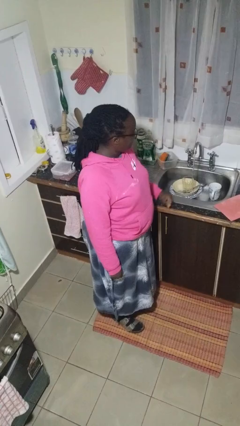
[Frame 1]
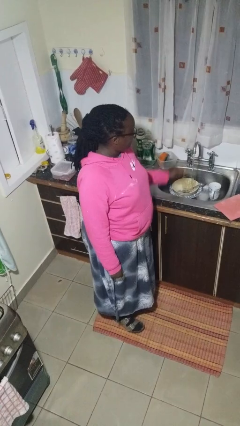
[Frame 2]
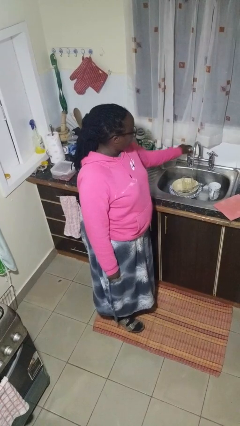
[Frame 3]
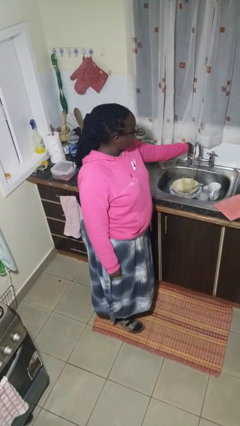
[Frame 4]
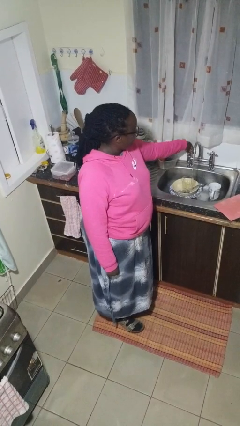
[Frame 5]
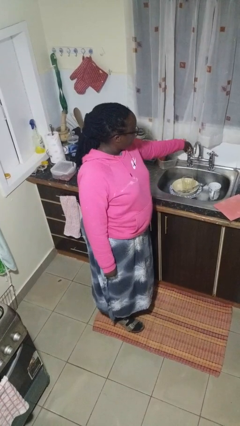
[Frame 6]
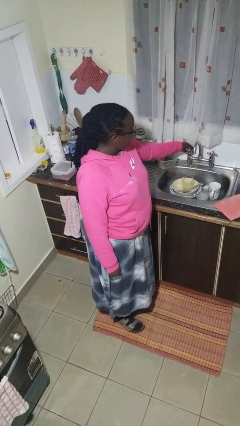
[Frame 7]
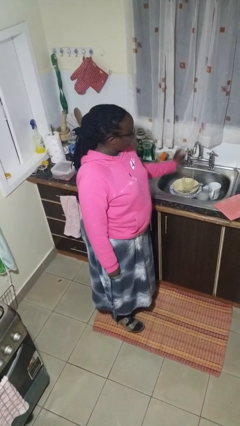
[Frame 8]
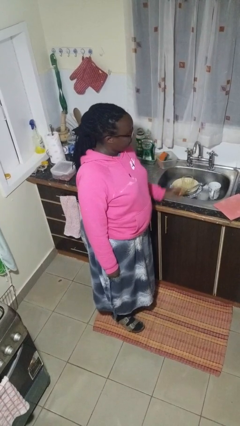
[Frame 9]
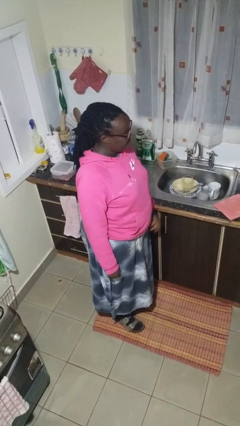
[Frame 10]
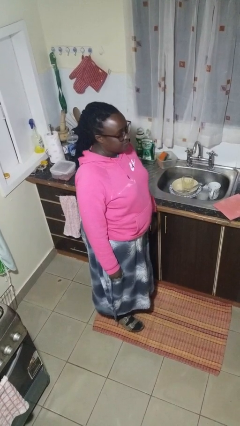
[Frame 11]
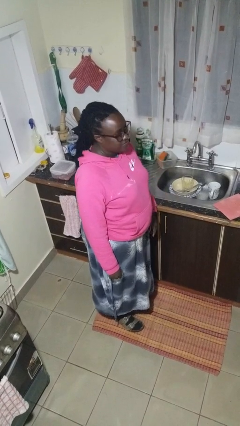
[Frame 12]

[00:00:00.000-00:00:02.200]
person turns off faucet

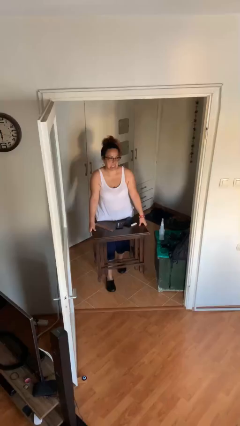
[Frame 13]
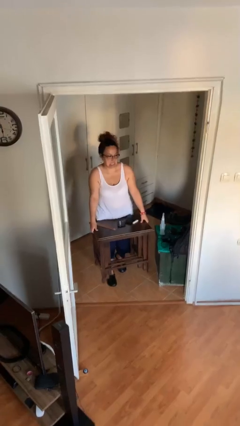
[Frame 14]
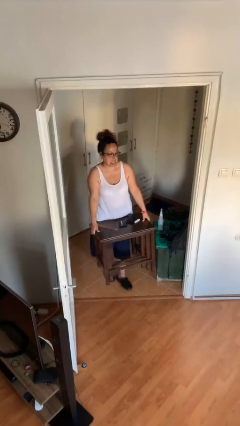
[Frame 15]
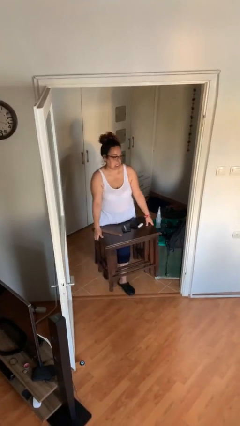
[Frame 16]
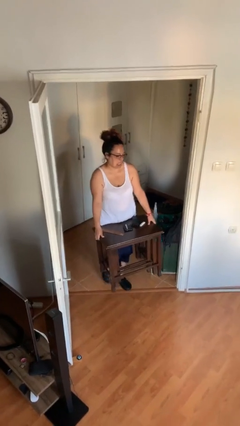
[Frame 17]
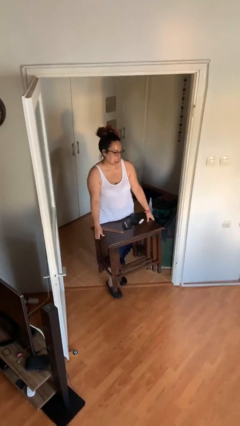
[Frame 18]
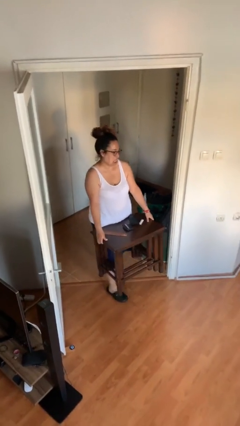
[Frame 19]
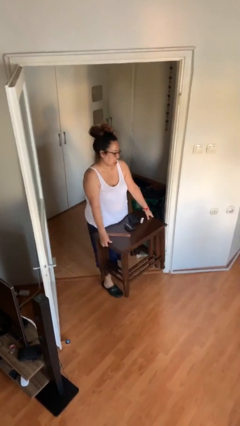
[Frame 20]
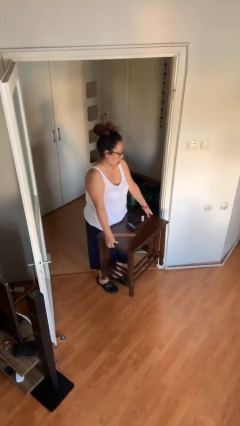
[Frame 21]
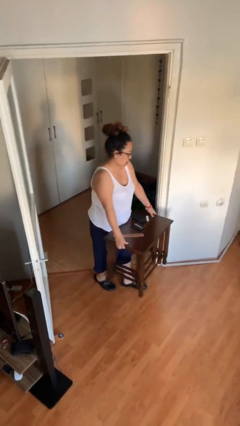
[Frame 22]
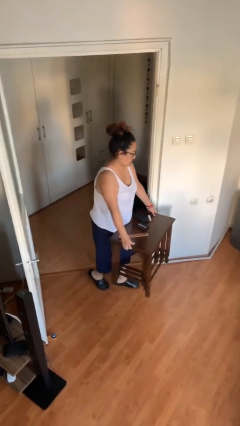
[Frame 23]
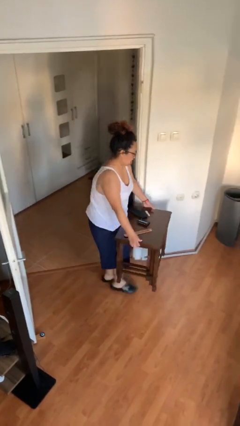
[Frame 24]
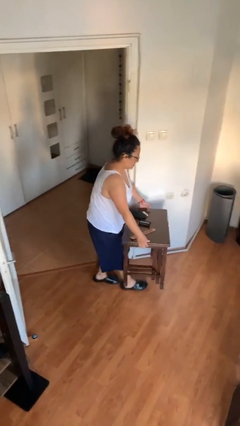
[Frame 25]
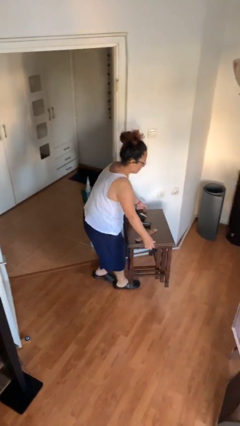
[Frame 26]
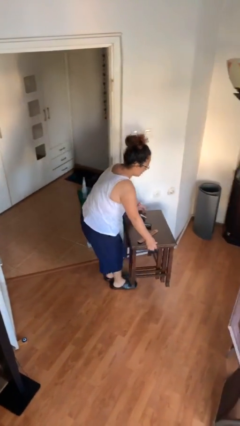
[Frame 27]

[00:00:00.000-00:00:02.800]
person carries heavy object

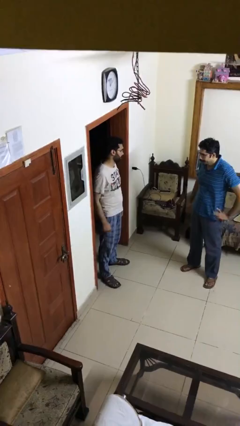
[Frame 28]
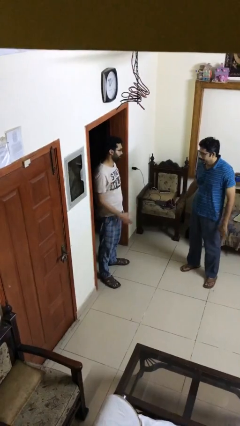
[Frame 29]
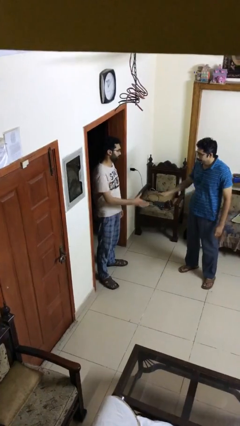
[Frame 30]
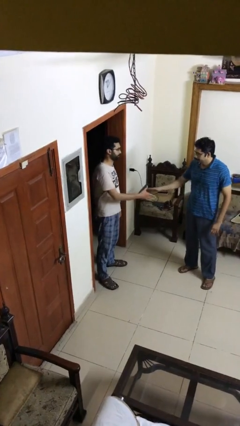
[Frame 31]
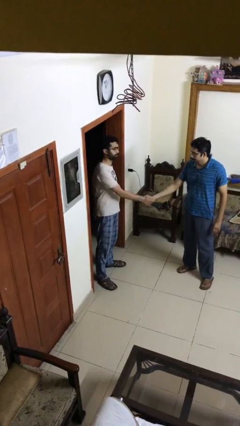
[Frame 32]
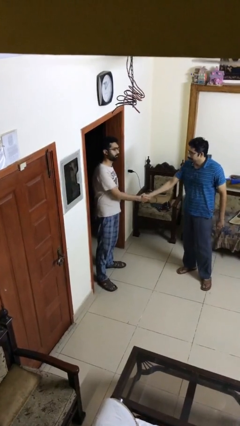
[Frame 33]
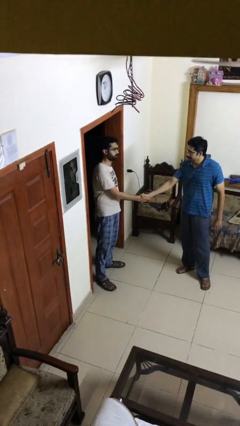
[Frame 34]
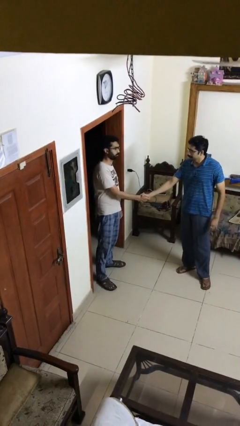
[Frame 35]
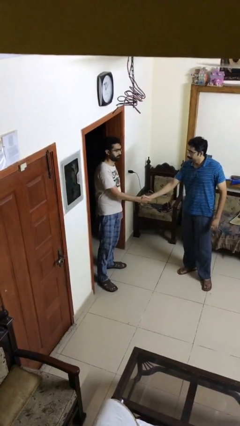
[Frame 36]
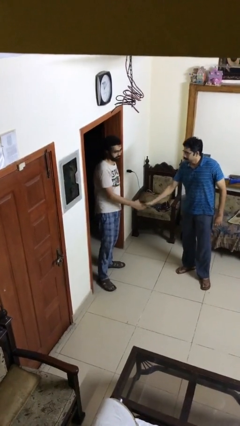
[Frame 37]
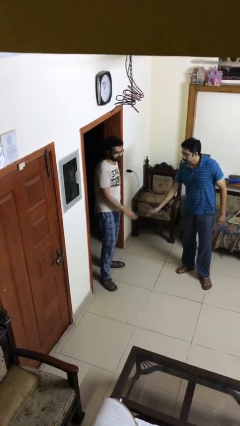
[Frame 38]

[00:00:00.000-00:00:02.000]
person shakes hand

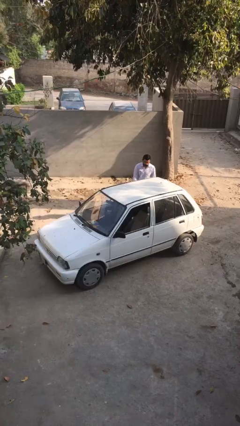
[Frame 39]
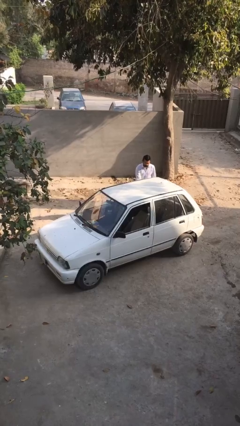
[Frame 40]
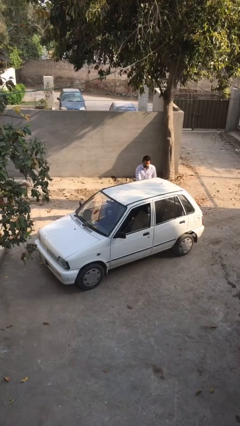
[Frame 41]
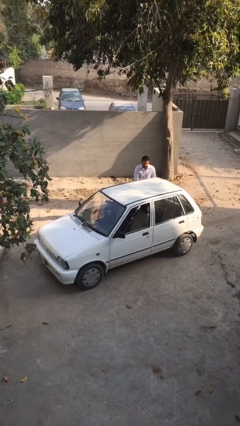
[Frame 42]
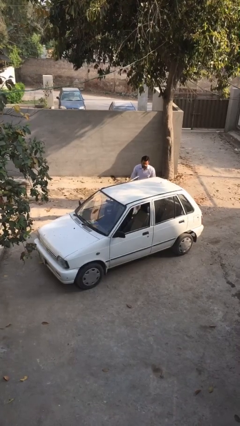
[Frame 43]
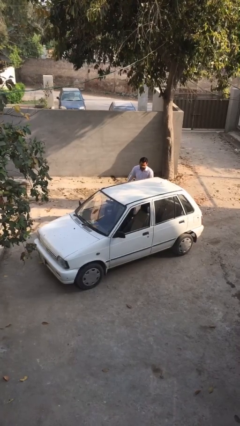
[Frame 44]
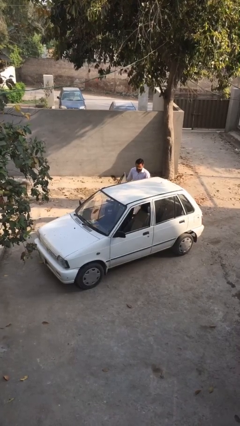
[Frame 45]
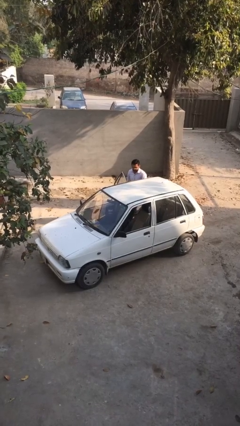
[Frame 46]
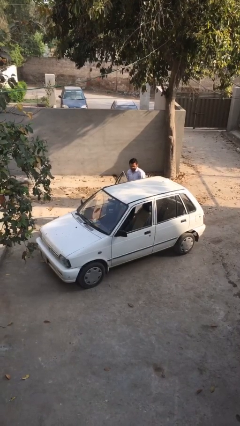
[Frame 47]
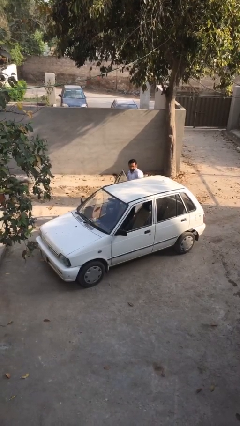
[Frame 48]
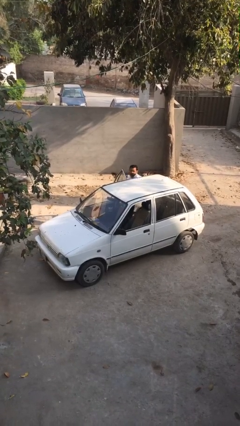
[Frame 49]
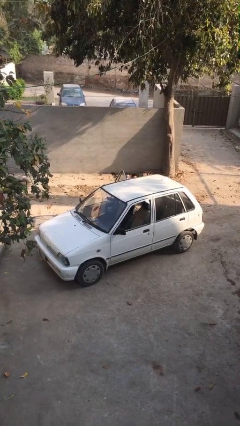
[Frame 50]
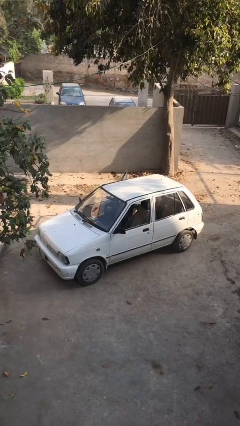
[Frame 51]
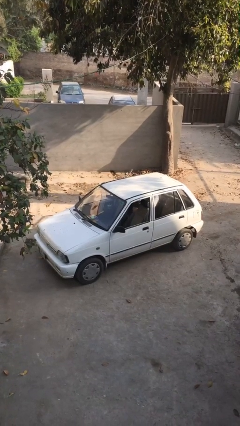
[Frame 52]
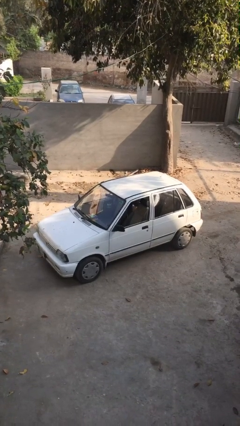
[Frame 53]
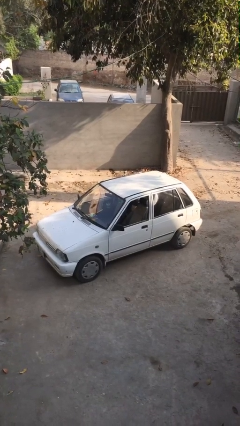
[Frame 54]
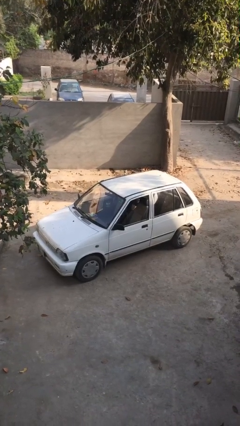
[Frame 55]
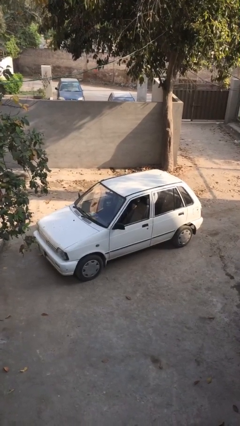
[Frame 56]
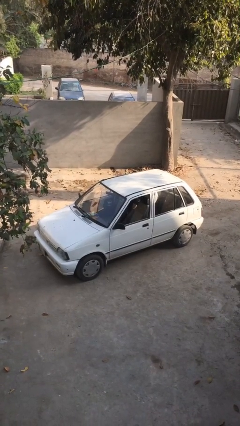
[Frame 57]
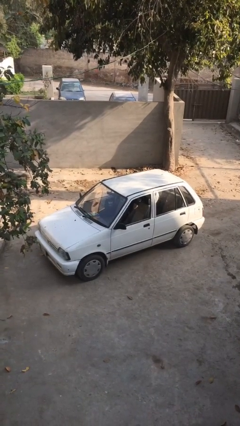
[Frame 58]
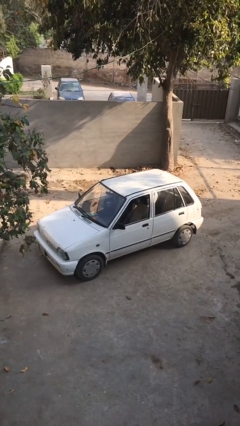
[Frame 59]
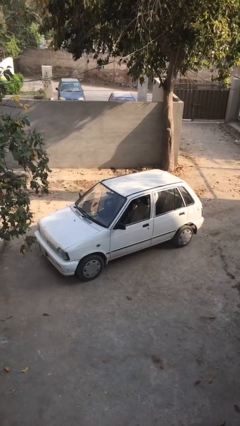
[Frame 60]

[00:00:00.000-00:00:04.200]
car picks up person

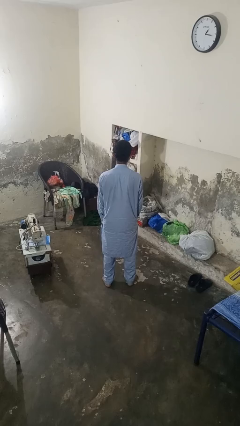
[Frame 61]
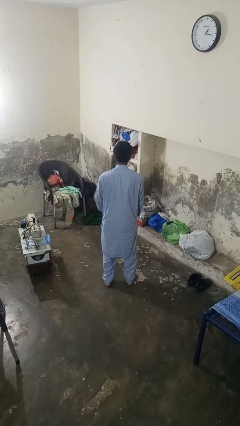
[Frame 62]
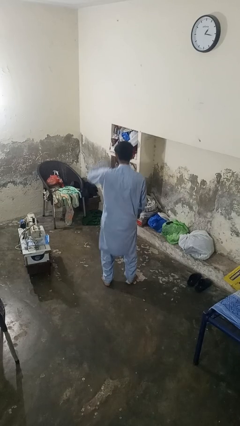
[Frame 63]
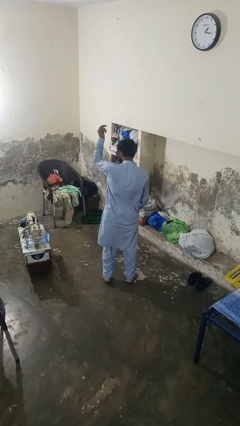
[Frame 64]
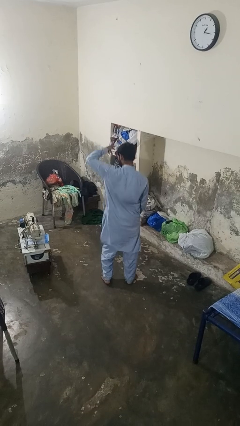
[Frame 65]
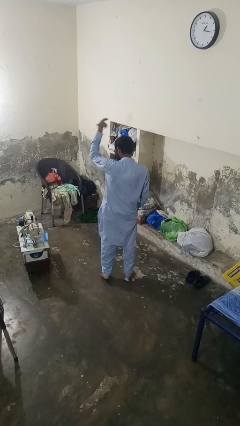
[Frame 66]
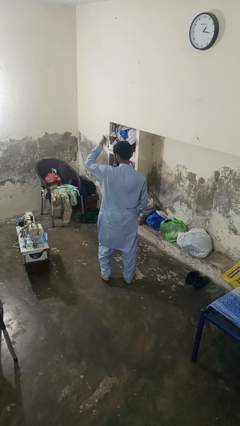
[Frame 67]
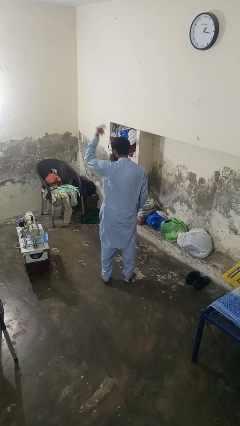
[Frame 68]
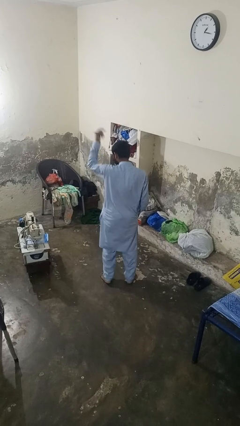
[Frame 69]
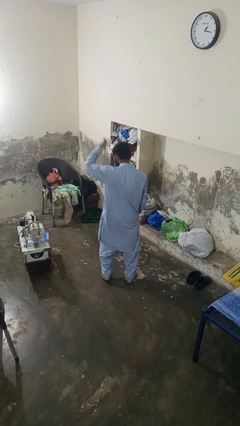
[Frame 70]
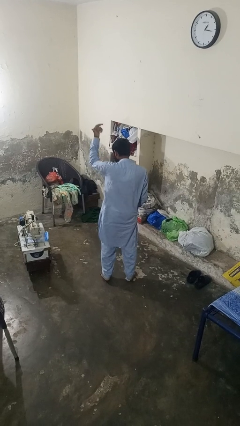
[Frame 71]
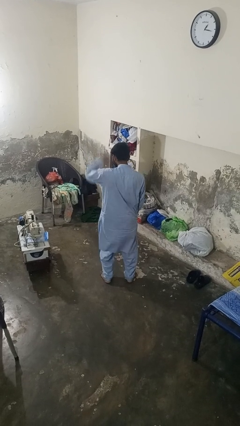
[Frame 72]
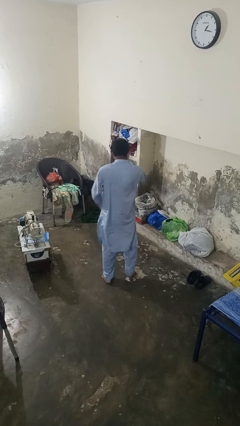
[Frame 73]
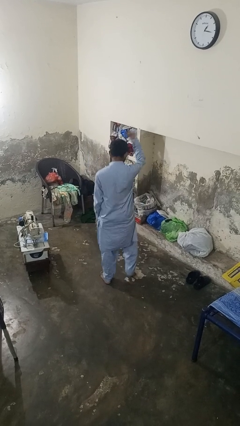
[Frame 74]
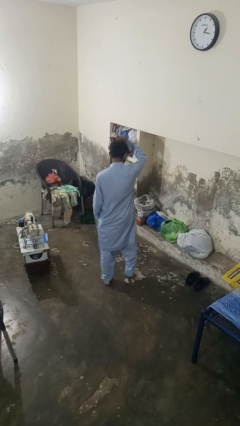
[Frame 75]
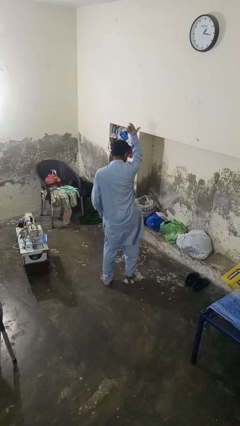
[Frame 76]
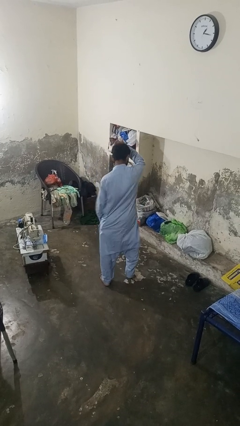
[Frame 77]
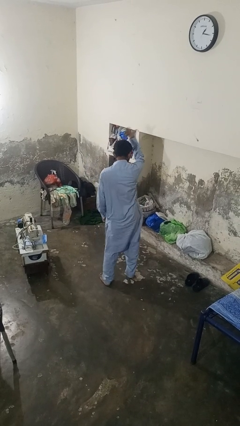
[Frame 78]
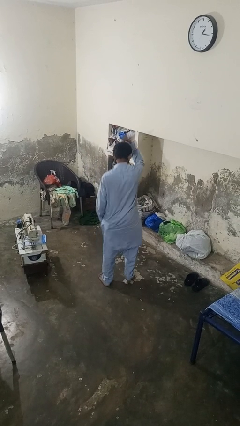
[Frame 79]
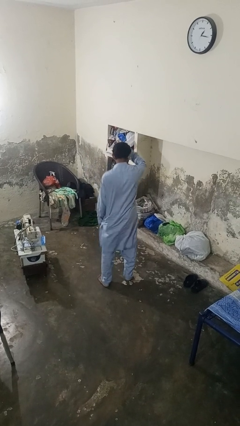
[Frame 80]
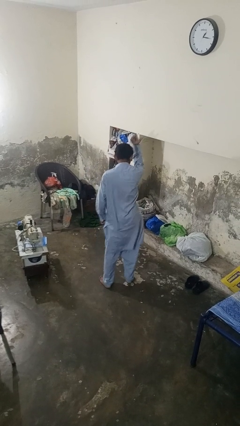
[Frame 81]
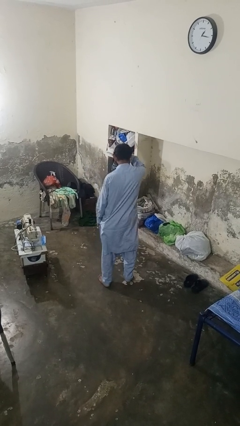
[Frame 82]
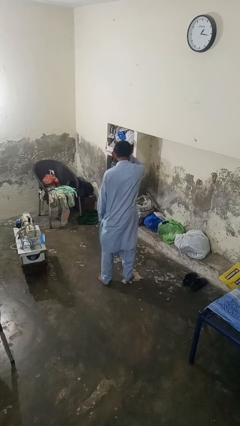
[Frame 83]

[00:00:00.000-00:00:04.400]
person dances in place

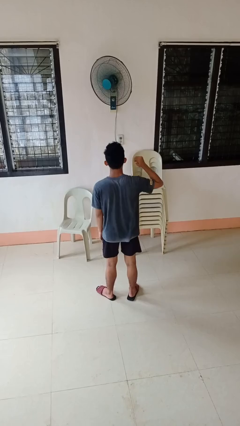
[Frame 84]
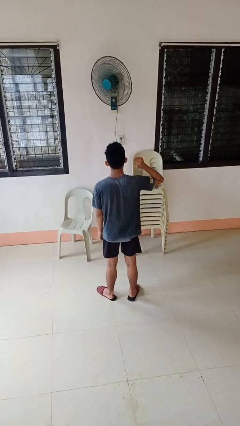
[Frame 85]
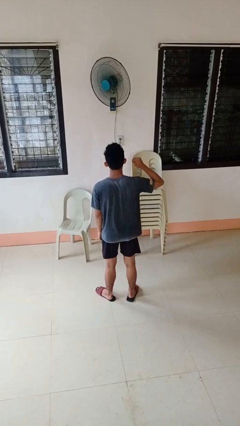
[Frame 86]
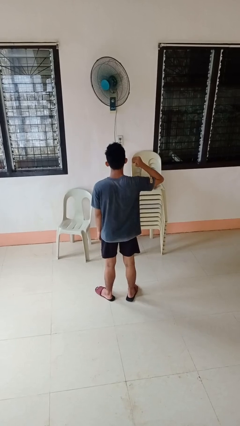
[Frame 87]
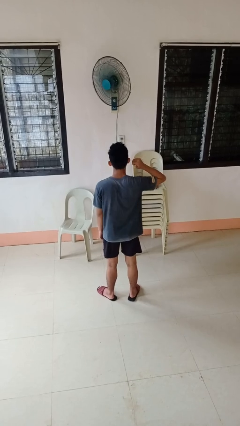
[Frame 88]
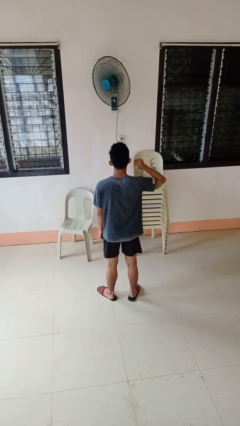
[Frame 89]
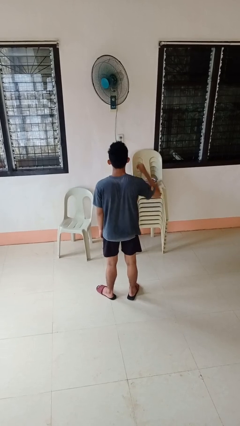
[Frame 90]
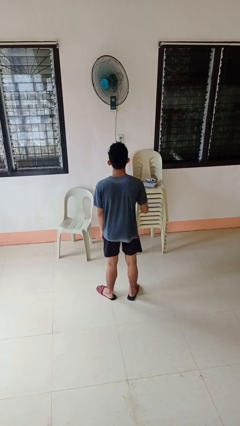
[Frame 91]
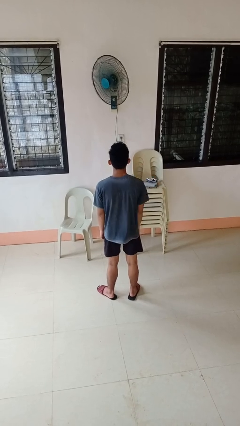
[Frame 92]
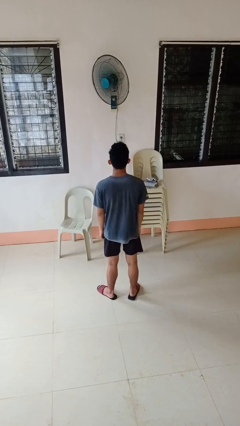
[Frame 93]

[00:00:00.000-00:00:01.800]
person gestures behind me
